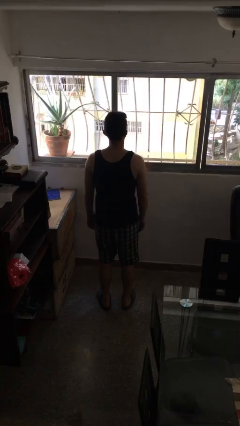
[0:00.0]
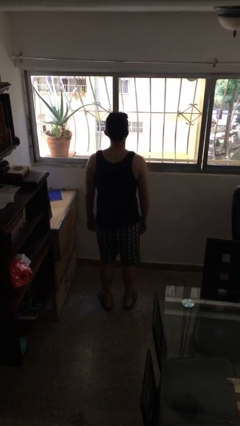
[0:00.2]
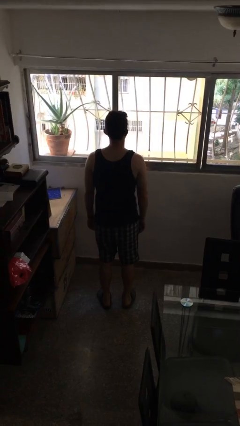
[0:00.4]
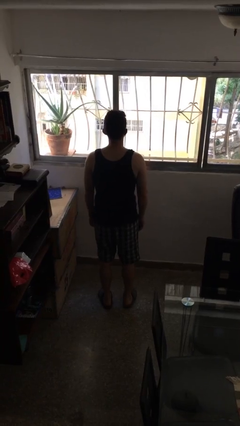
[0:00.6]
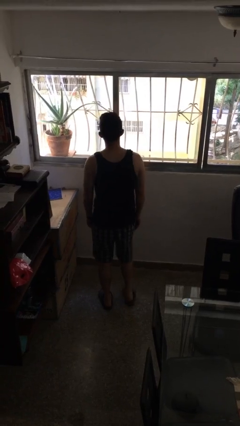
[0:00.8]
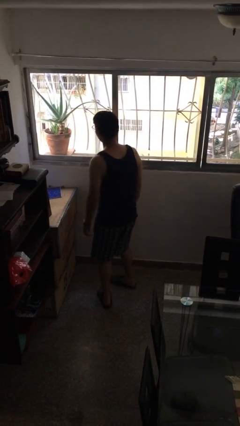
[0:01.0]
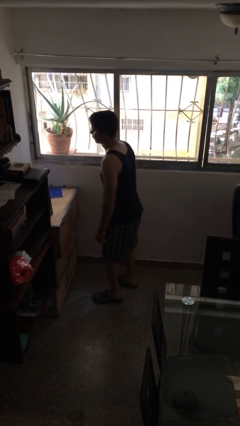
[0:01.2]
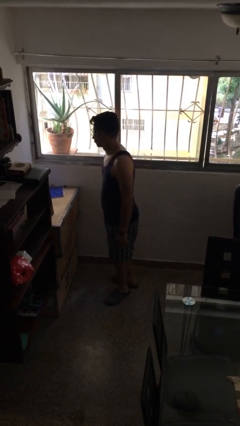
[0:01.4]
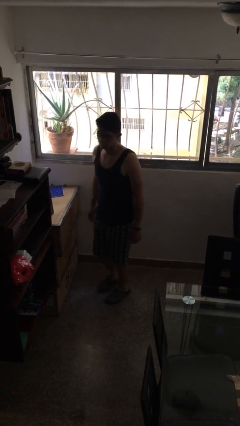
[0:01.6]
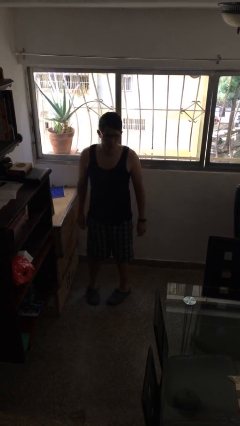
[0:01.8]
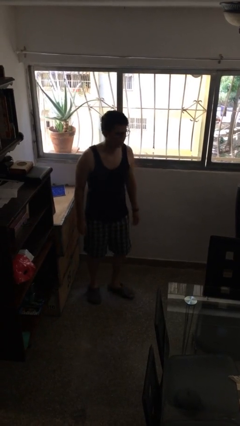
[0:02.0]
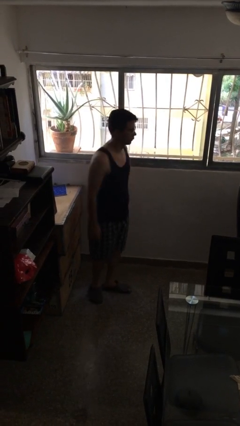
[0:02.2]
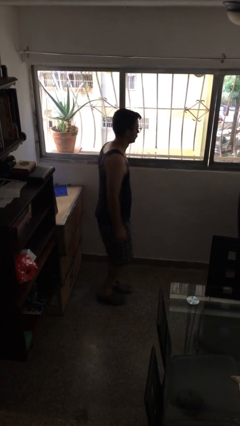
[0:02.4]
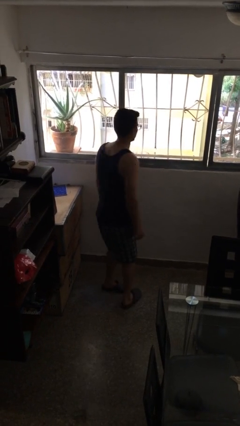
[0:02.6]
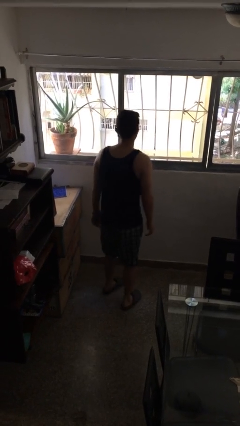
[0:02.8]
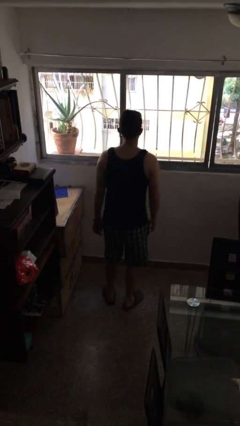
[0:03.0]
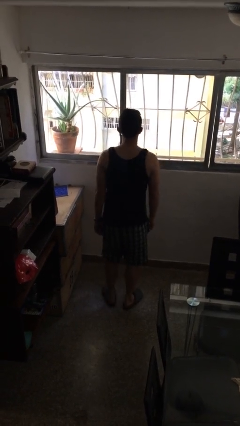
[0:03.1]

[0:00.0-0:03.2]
person twirls

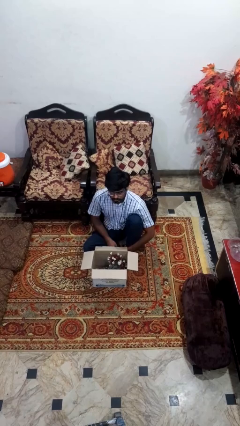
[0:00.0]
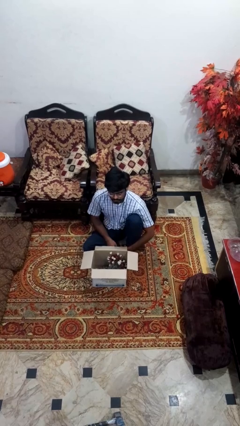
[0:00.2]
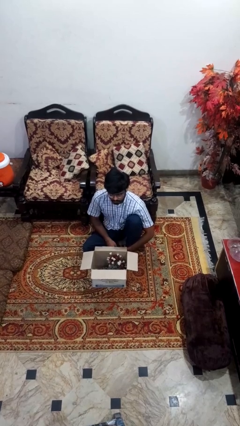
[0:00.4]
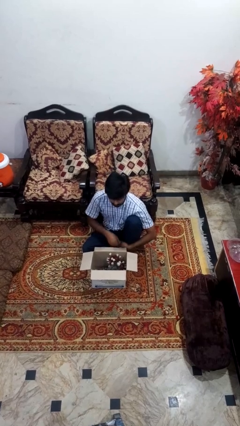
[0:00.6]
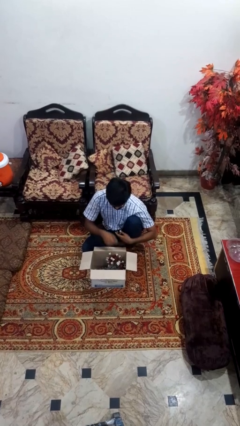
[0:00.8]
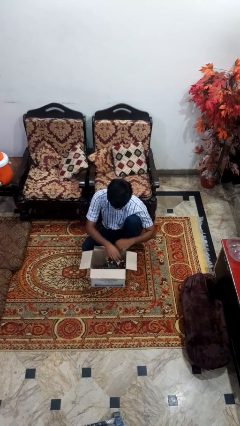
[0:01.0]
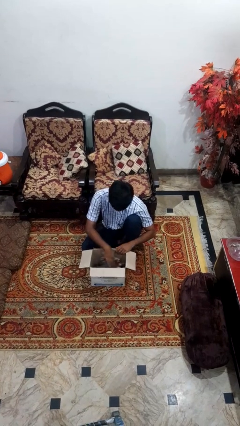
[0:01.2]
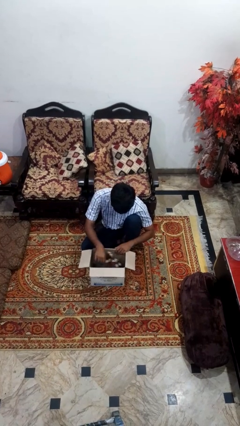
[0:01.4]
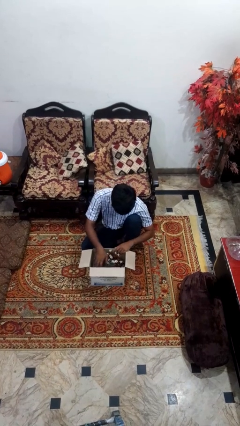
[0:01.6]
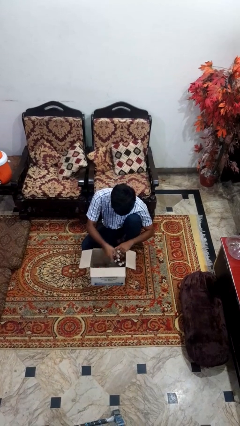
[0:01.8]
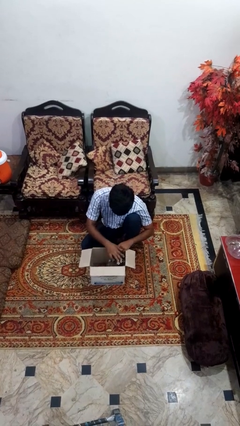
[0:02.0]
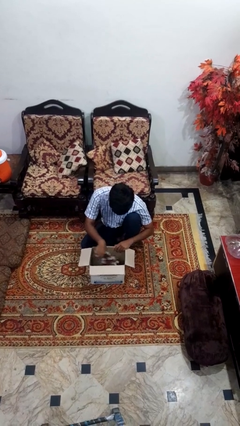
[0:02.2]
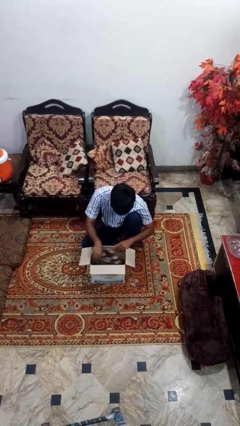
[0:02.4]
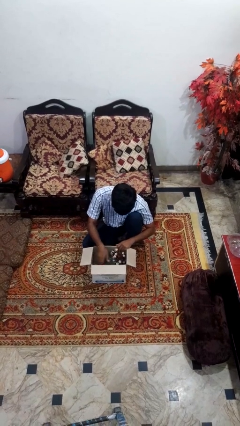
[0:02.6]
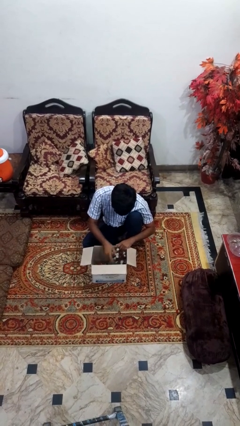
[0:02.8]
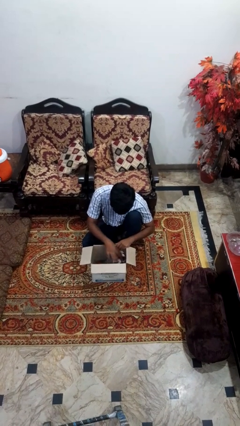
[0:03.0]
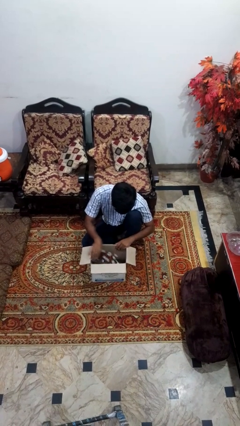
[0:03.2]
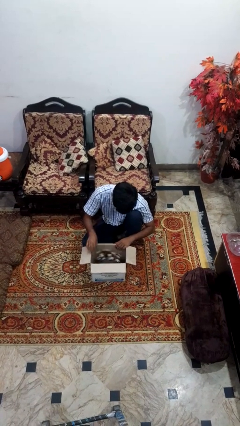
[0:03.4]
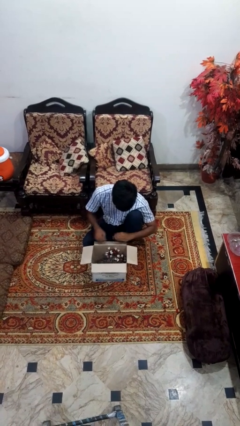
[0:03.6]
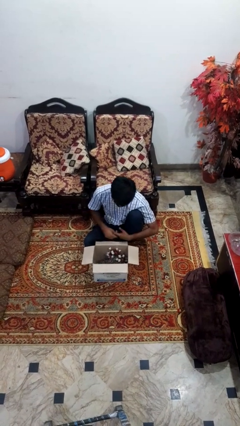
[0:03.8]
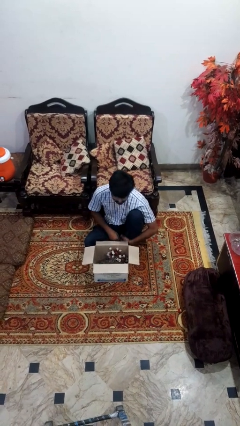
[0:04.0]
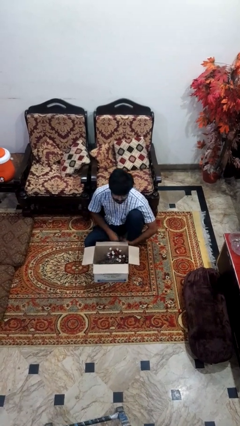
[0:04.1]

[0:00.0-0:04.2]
person searches in box

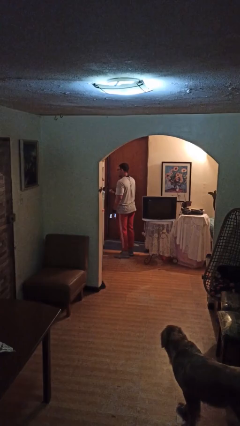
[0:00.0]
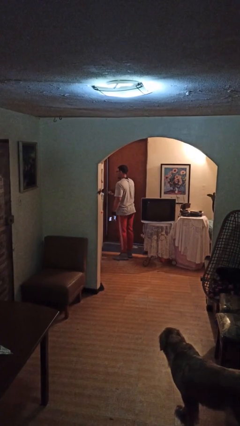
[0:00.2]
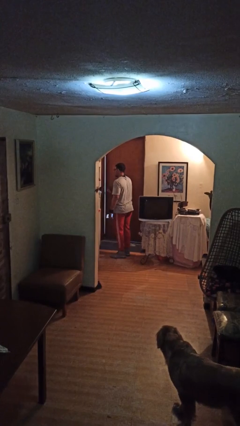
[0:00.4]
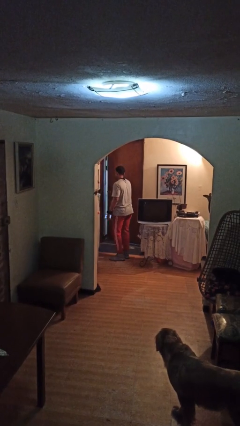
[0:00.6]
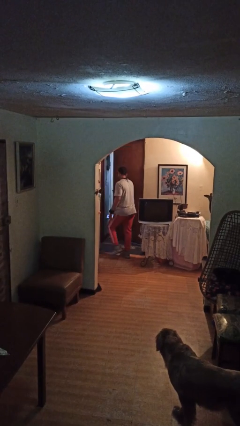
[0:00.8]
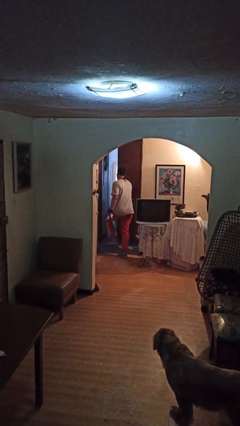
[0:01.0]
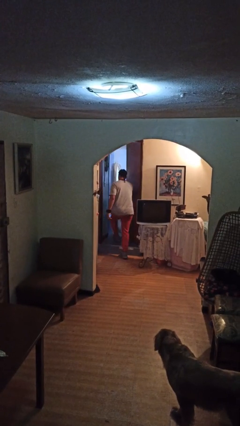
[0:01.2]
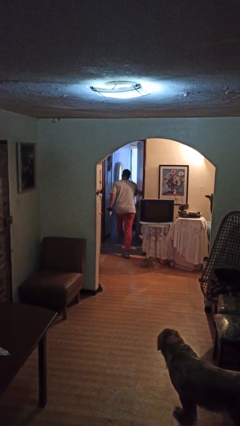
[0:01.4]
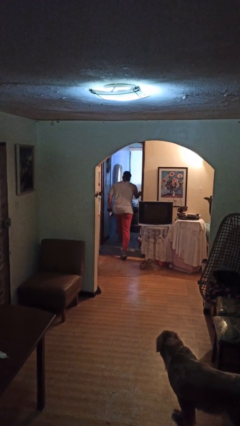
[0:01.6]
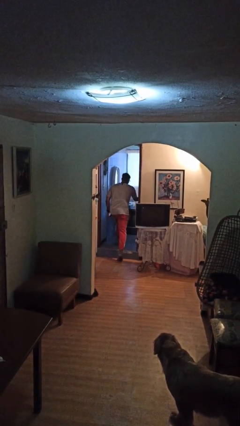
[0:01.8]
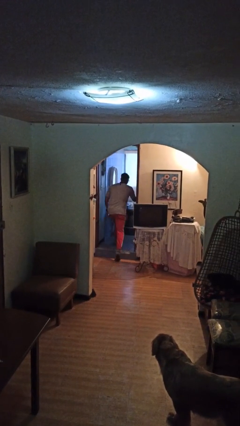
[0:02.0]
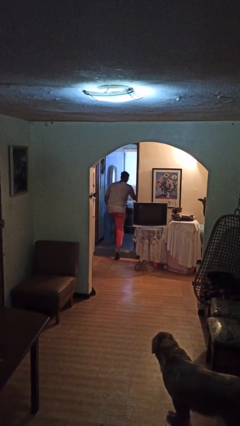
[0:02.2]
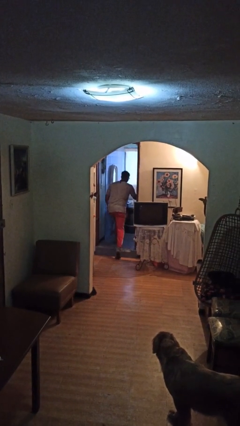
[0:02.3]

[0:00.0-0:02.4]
person opens facility door

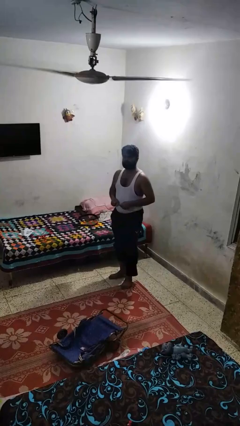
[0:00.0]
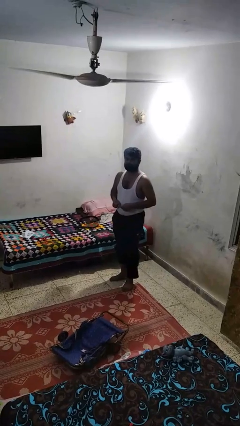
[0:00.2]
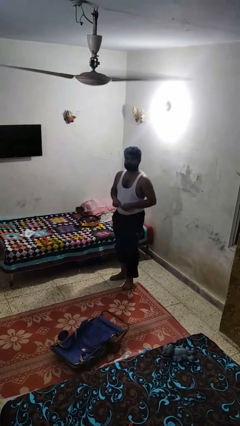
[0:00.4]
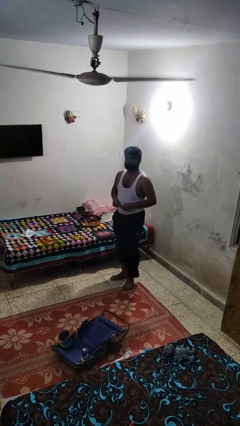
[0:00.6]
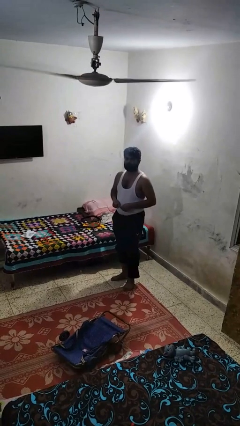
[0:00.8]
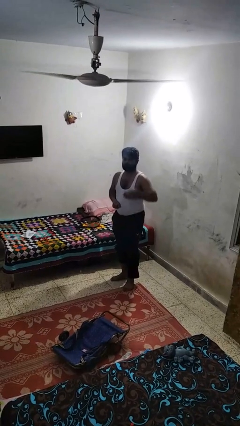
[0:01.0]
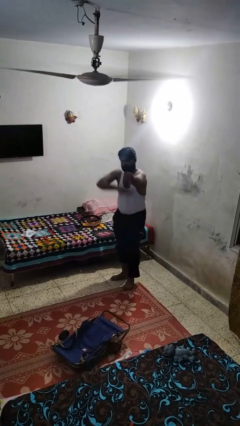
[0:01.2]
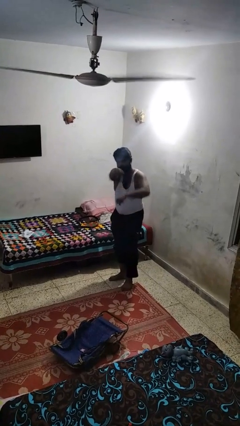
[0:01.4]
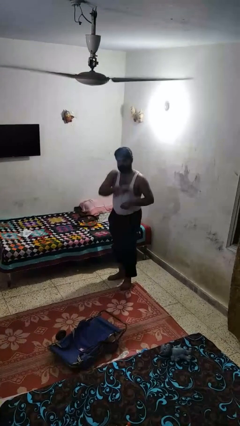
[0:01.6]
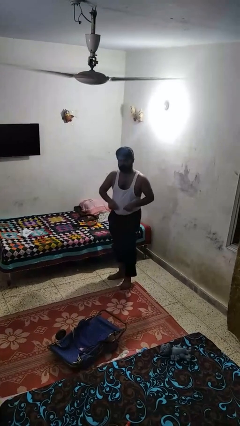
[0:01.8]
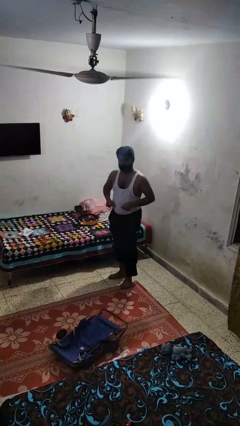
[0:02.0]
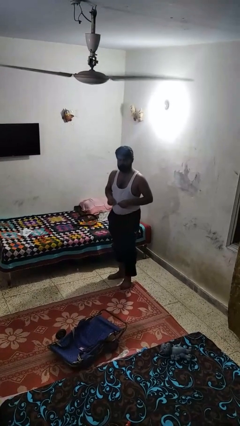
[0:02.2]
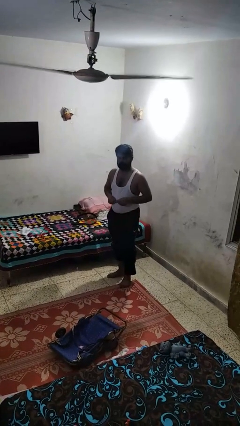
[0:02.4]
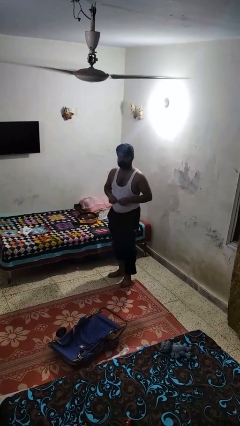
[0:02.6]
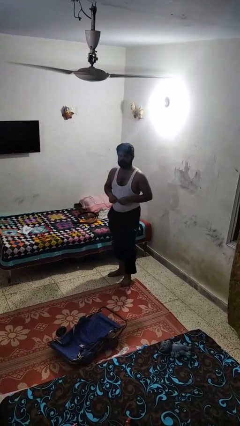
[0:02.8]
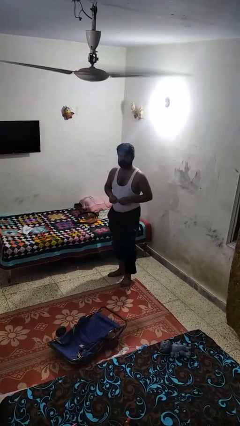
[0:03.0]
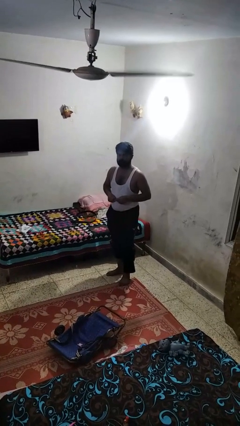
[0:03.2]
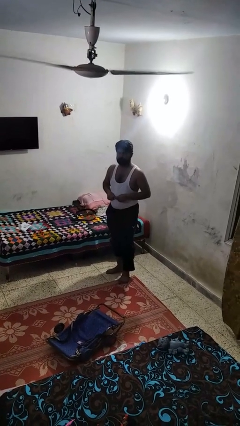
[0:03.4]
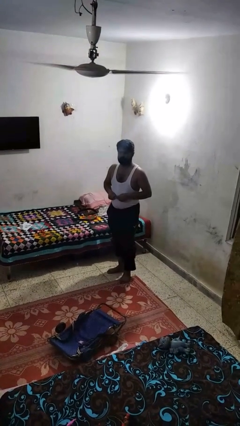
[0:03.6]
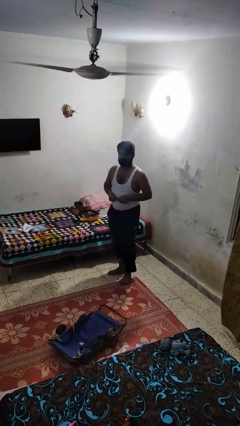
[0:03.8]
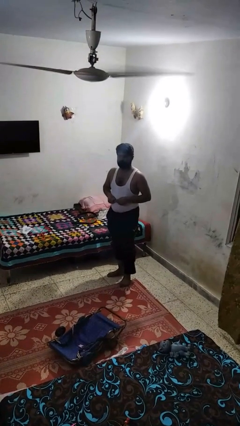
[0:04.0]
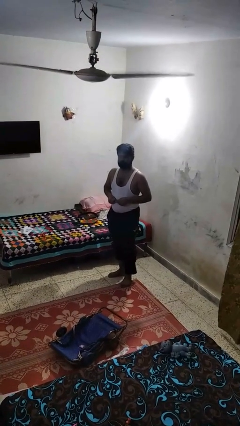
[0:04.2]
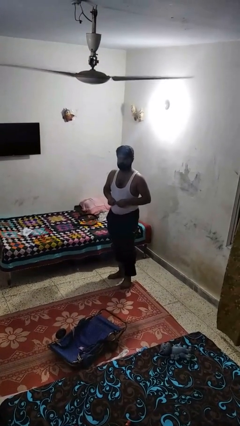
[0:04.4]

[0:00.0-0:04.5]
person karate chop

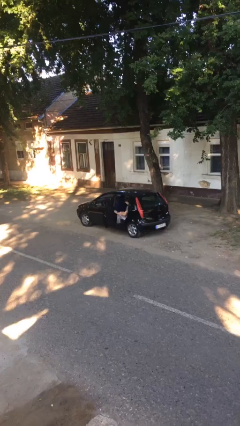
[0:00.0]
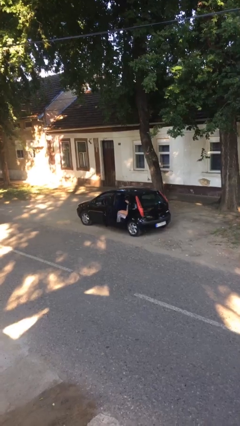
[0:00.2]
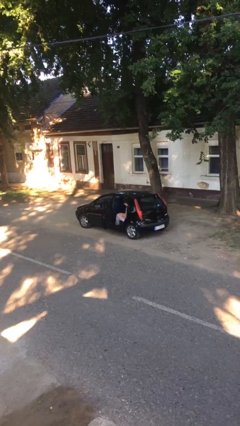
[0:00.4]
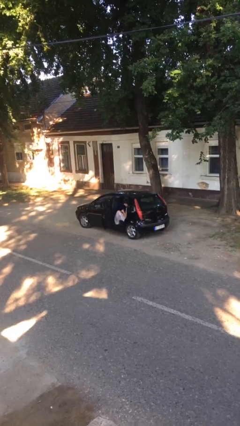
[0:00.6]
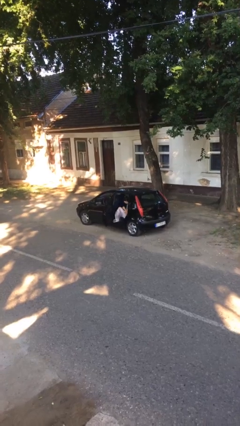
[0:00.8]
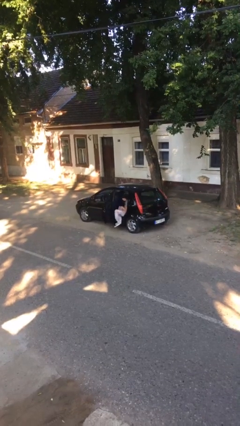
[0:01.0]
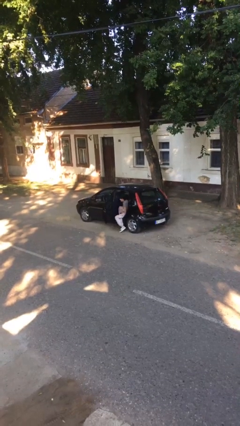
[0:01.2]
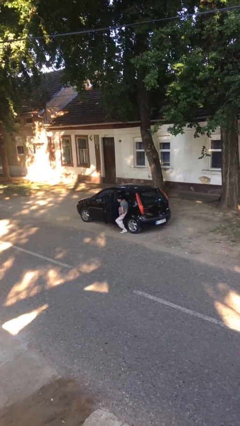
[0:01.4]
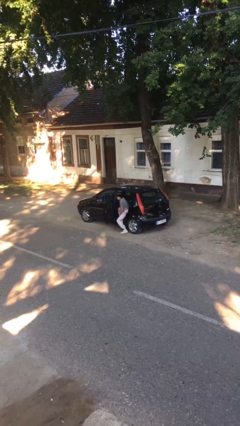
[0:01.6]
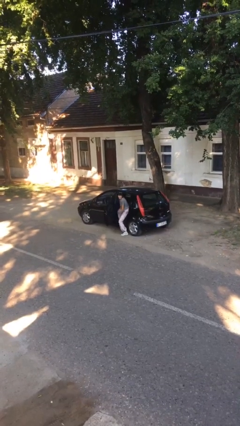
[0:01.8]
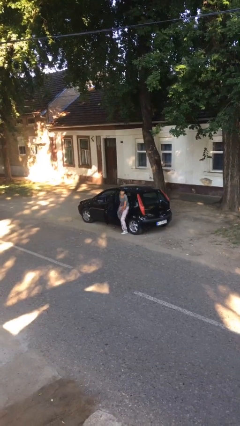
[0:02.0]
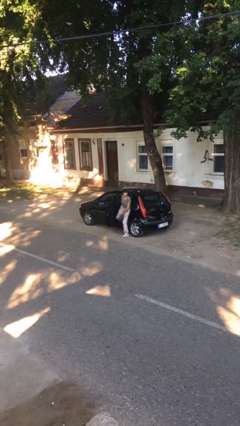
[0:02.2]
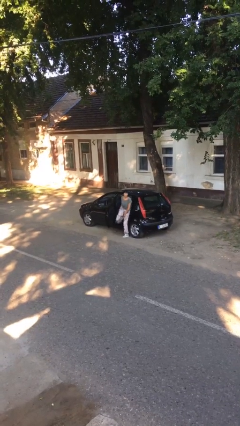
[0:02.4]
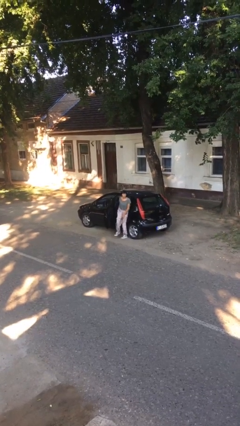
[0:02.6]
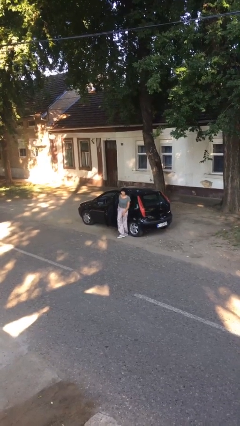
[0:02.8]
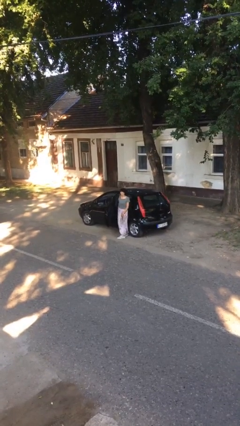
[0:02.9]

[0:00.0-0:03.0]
person exits car
